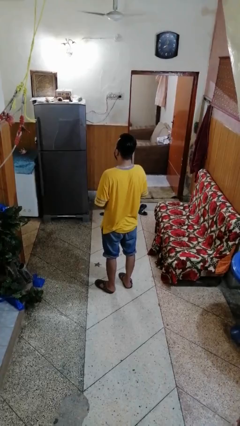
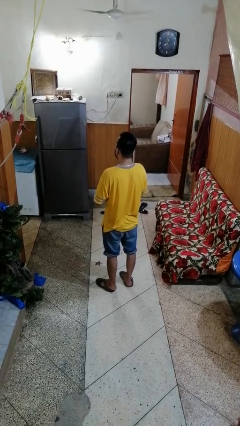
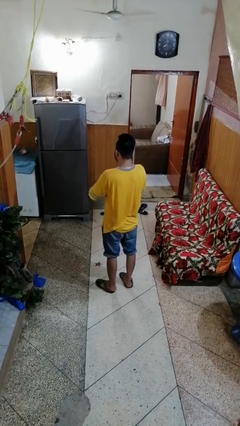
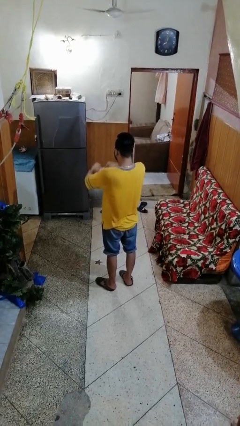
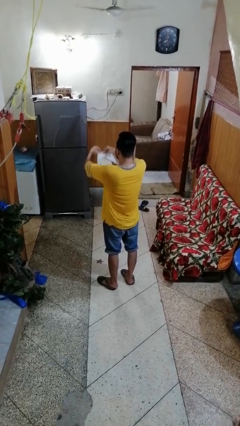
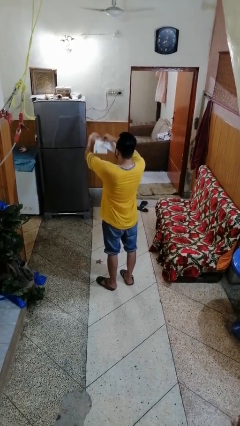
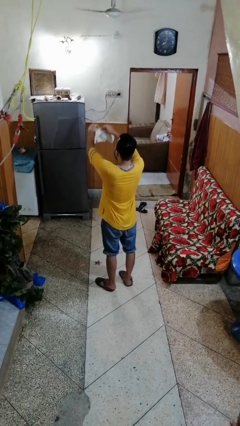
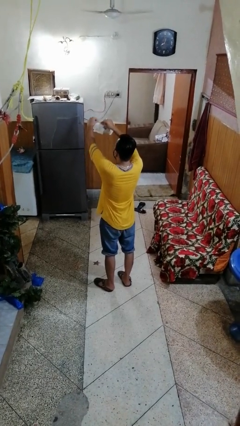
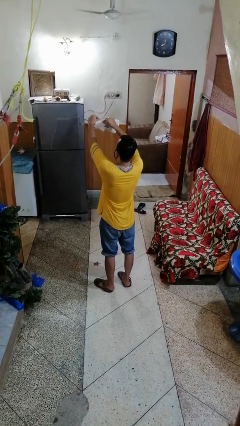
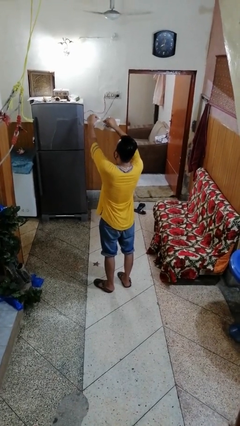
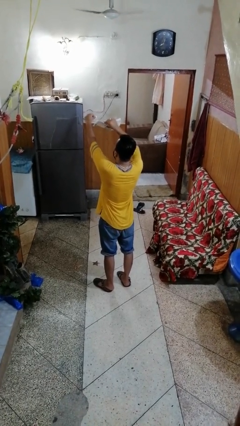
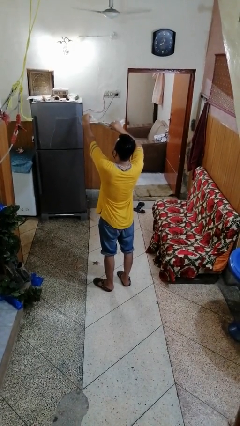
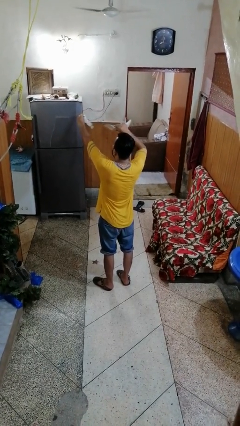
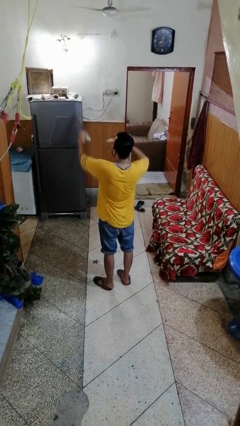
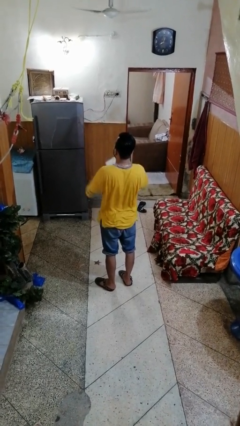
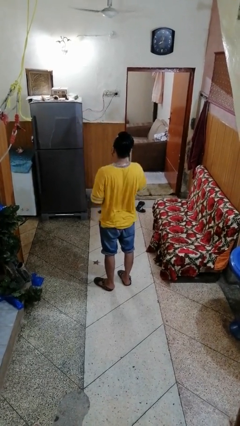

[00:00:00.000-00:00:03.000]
person tears paper

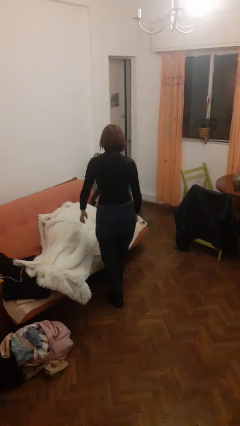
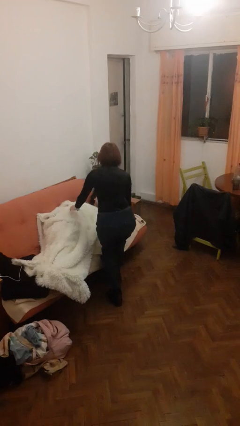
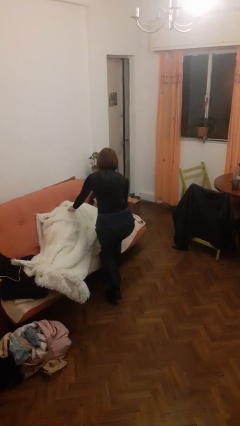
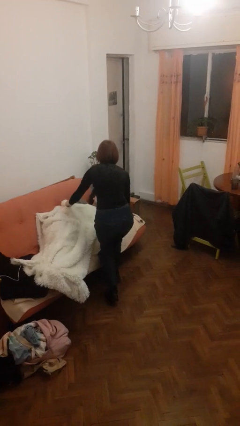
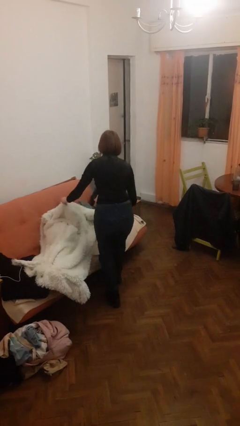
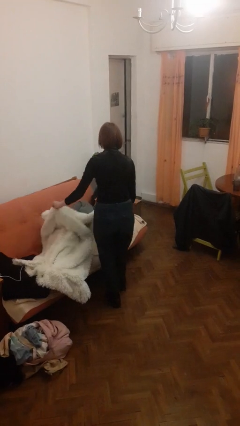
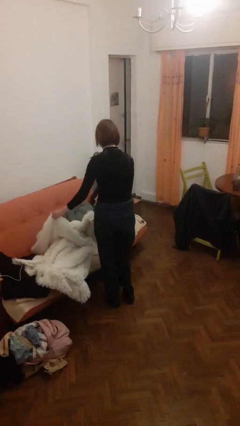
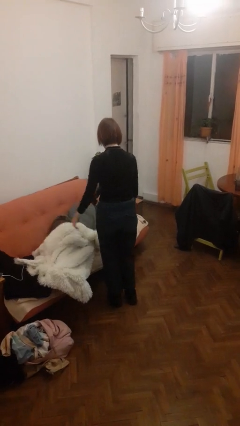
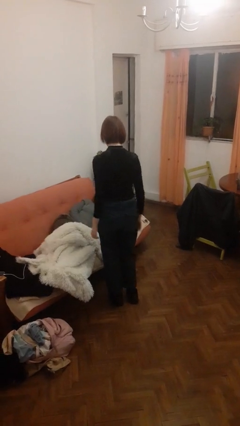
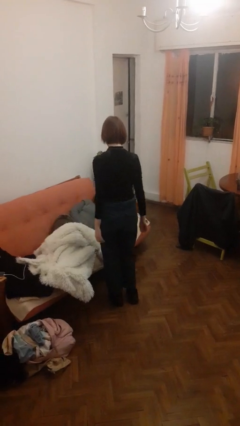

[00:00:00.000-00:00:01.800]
person uncovers friend with blanket

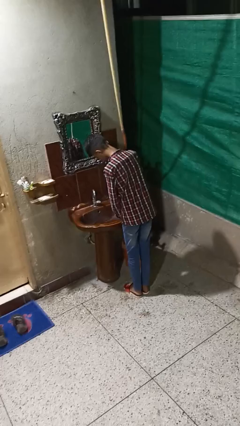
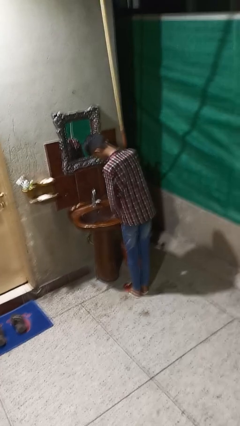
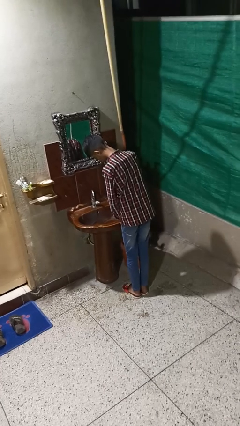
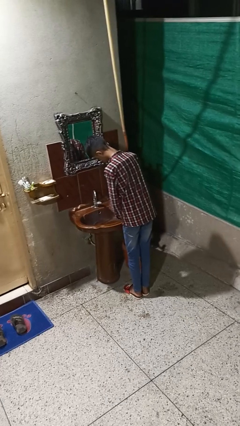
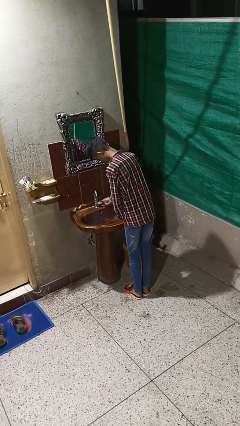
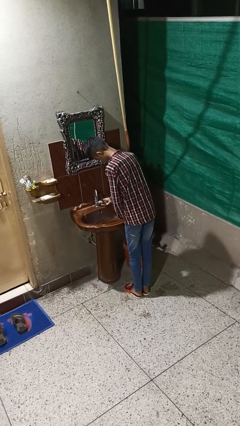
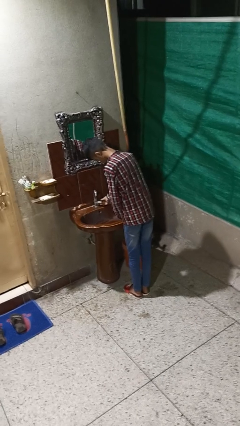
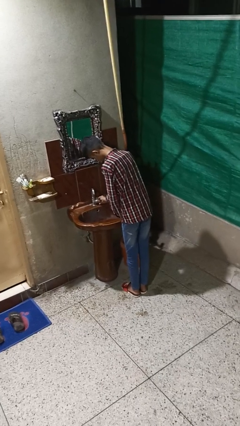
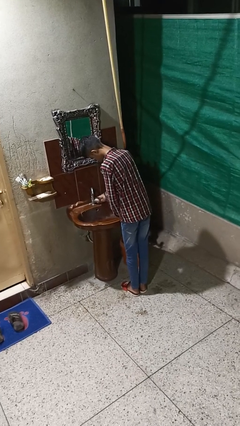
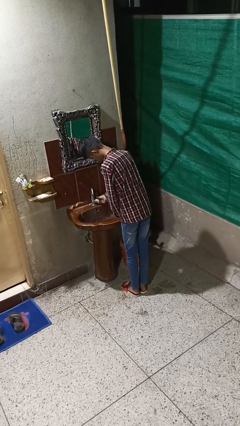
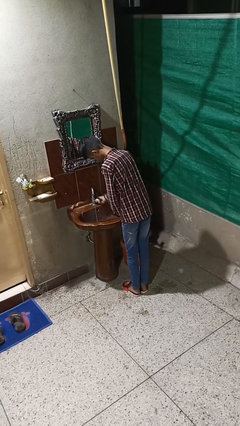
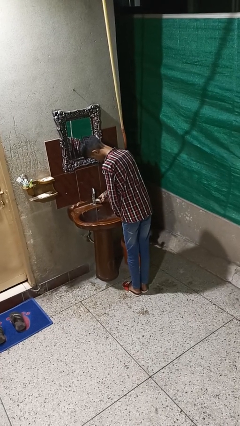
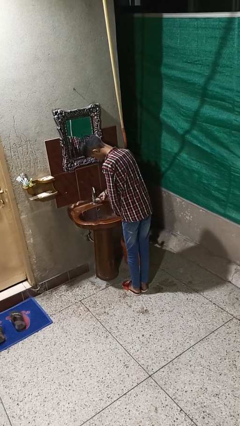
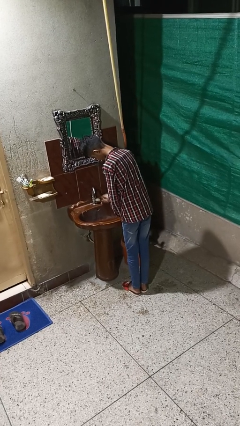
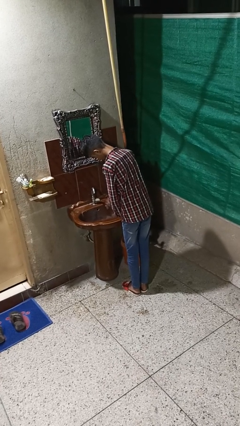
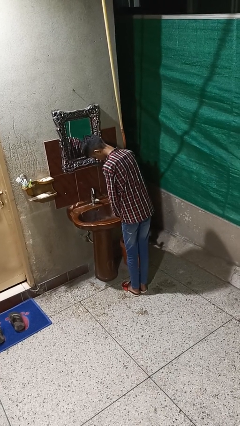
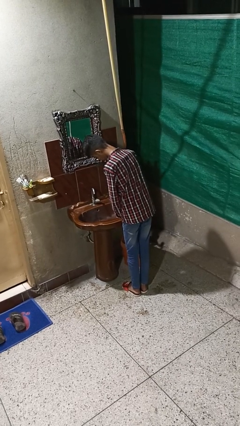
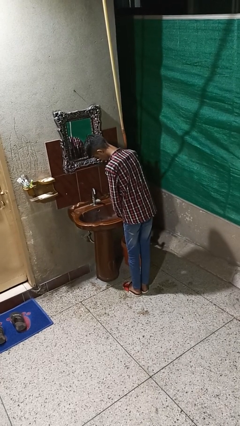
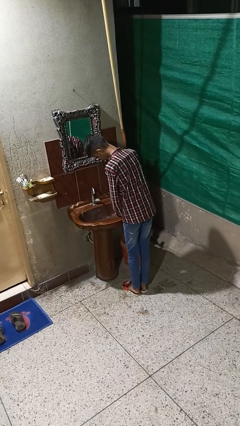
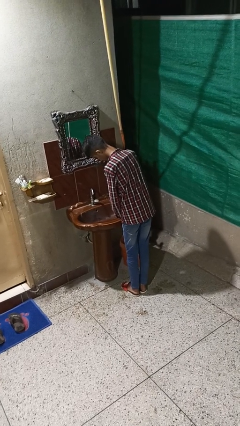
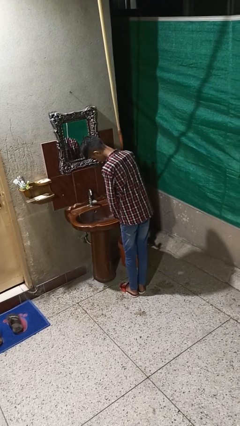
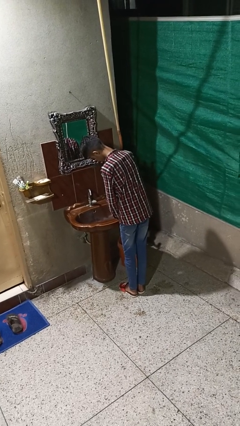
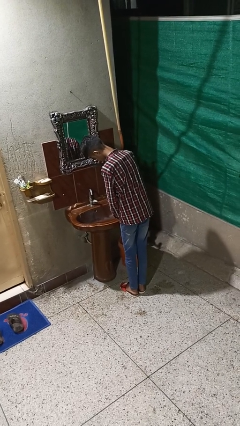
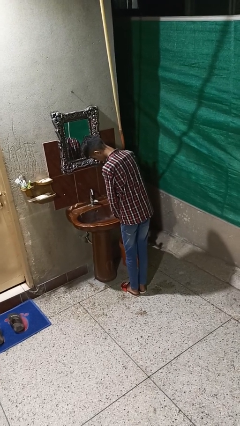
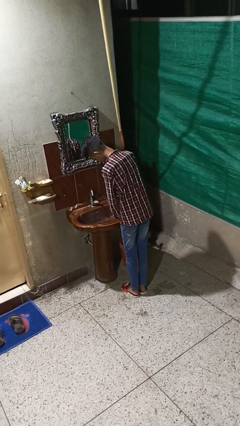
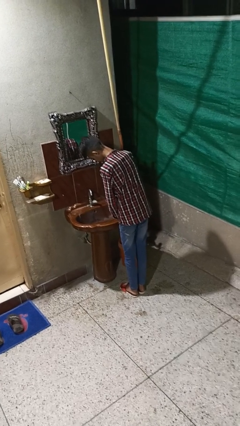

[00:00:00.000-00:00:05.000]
person turns off faucet

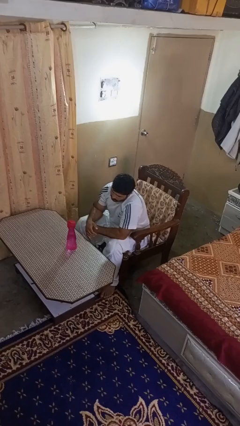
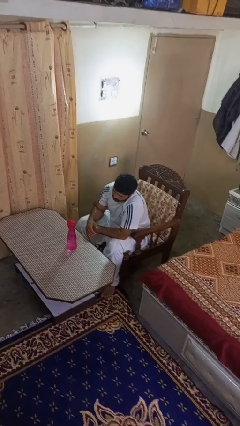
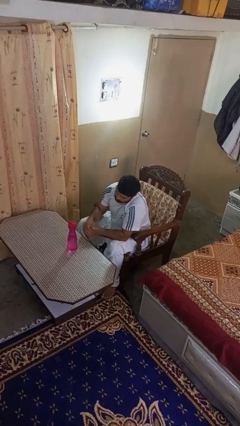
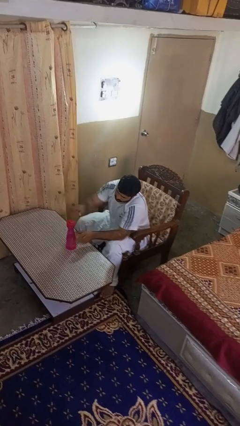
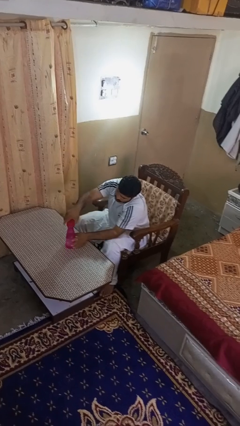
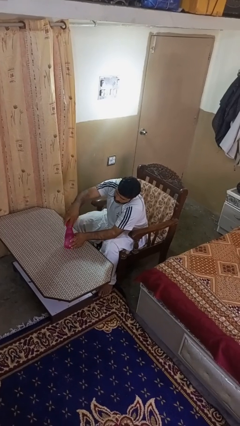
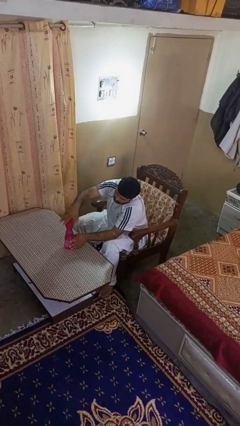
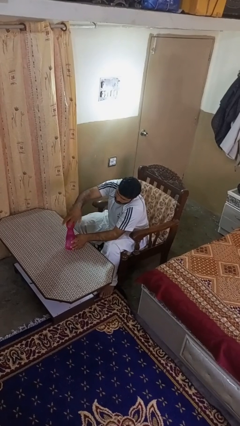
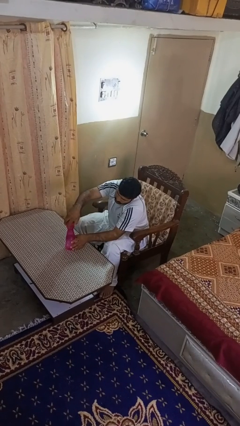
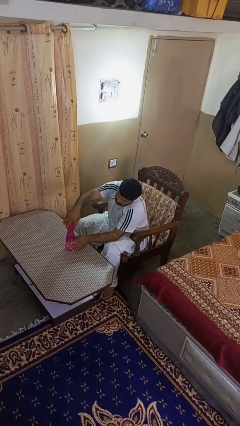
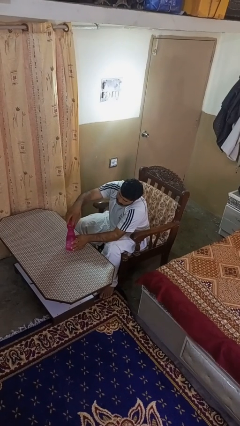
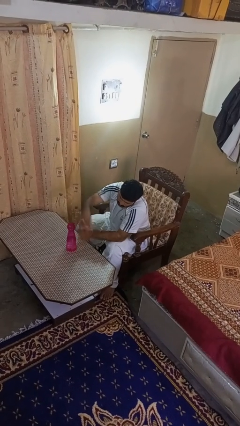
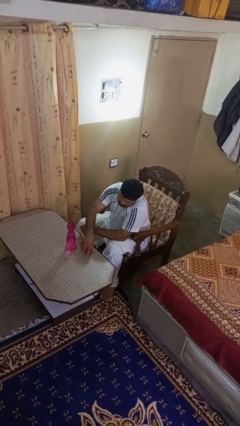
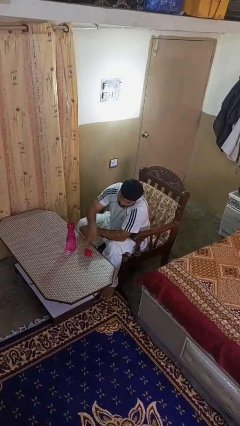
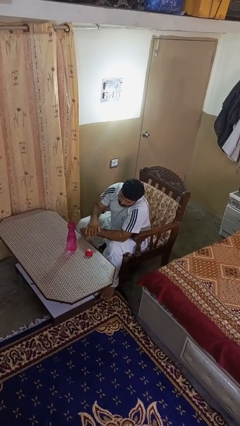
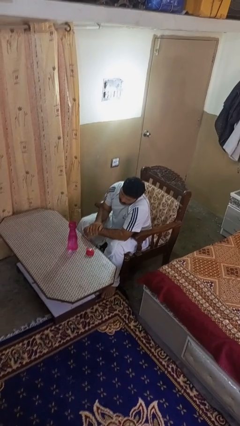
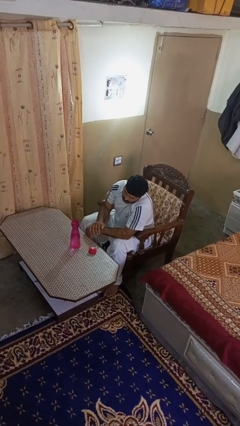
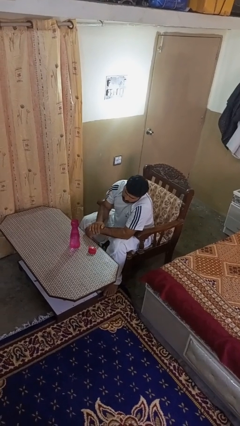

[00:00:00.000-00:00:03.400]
person unscrews lid from bottle

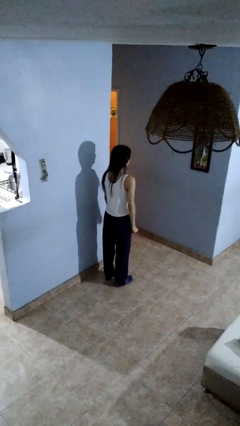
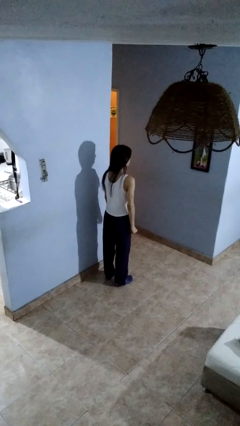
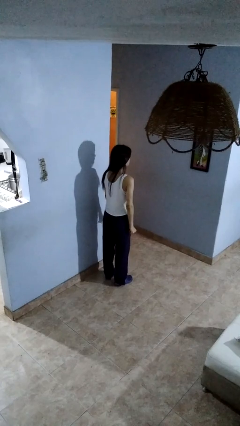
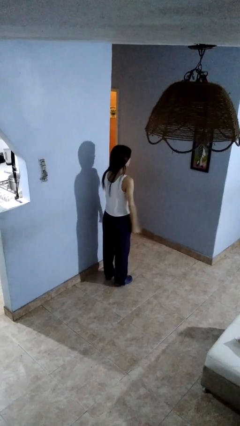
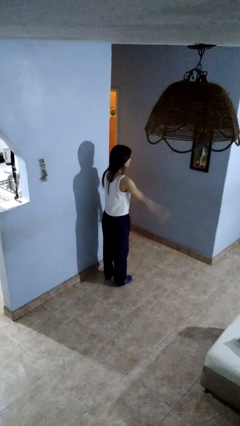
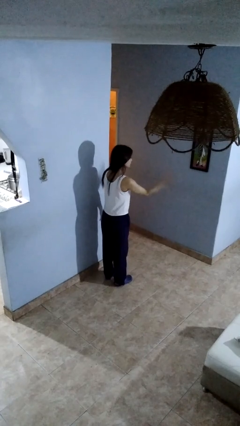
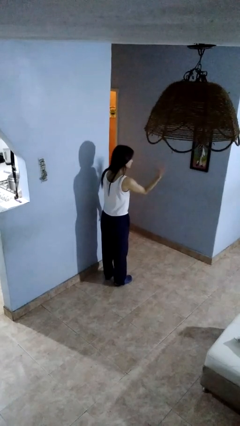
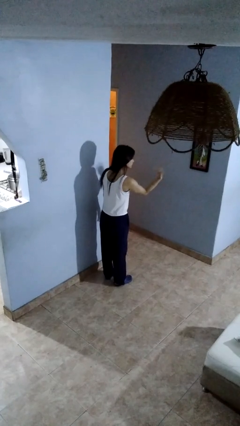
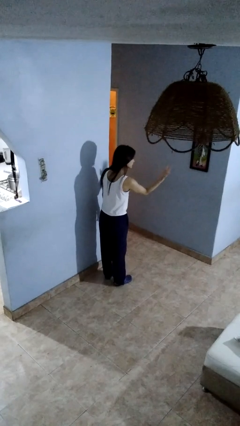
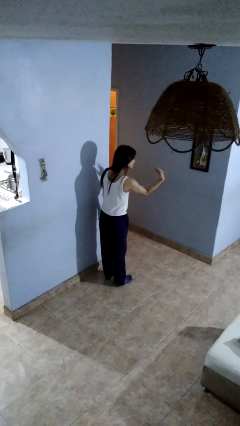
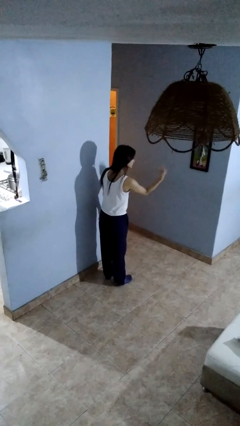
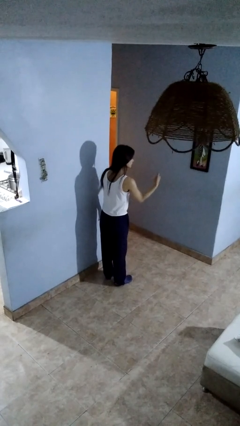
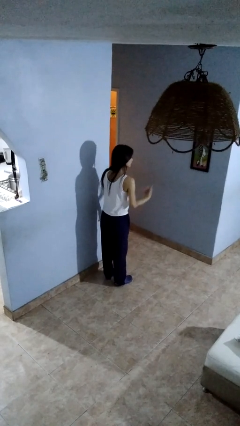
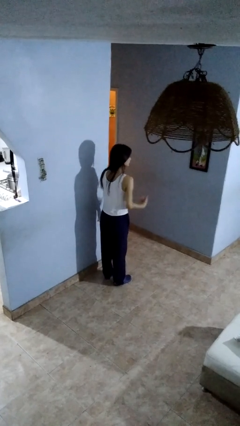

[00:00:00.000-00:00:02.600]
person gestures come here

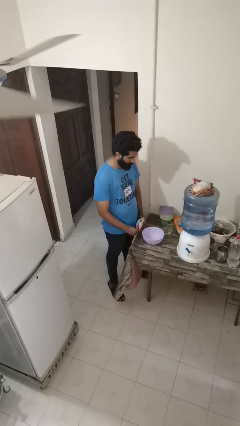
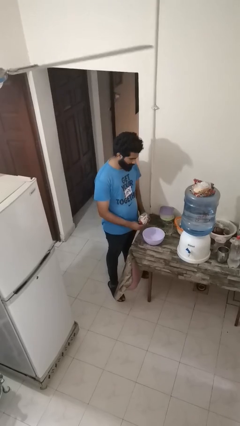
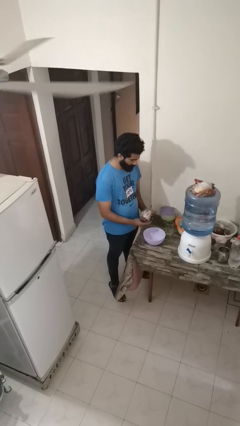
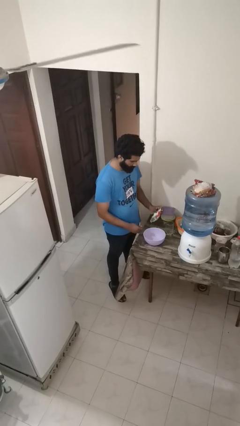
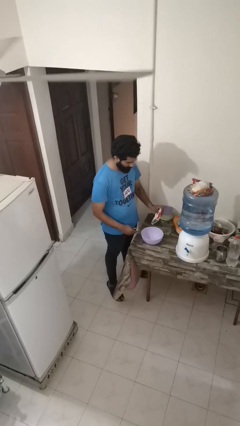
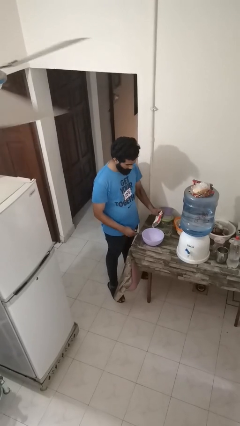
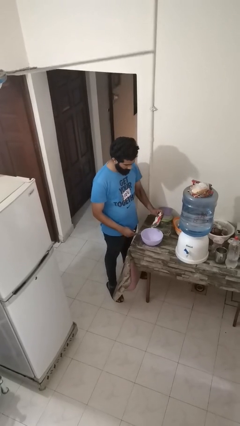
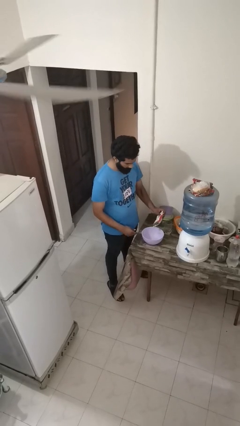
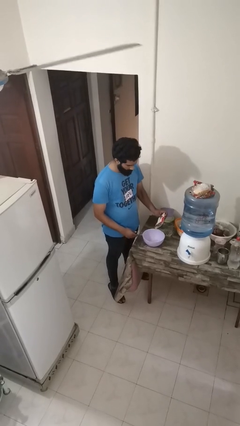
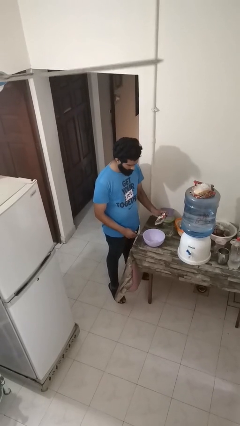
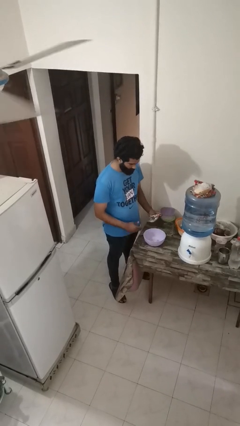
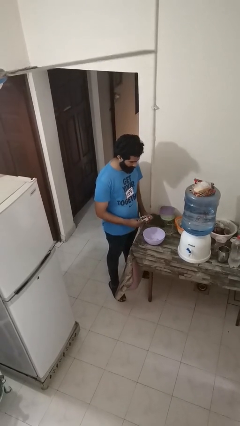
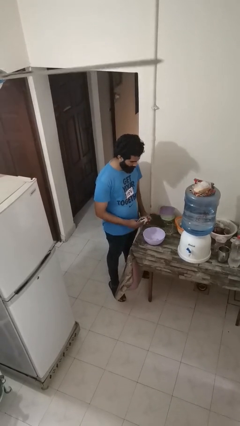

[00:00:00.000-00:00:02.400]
person pours into bowl
